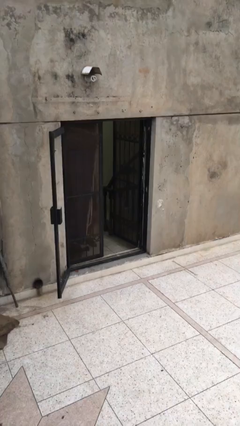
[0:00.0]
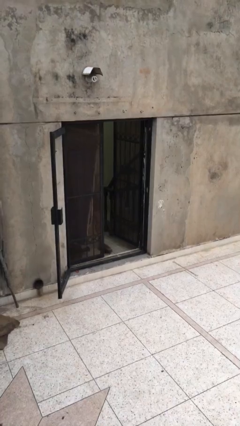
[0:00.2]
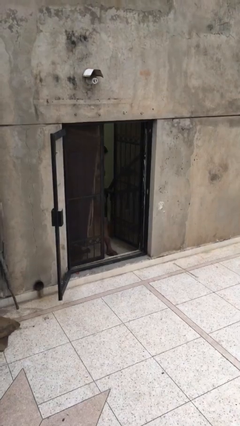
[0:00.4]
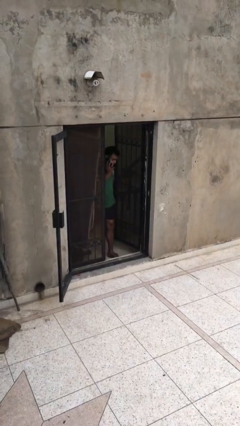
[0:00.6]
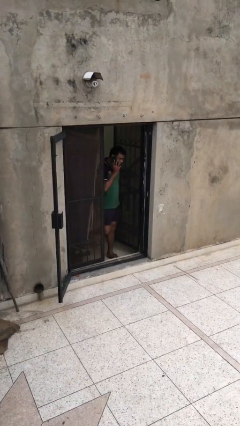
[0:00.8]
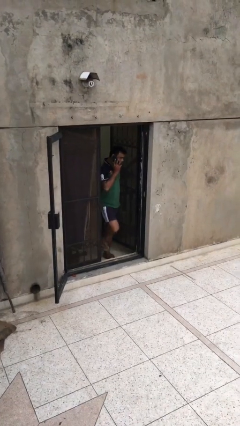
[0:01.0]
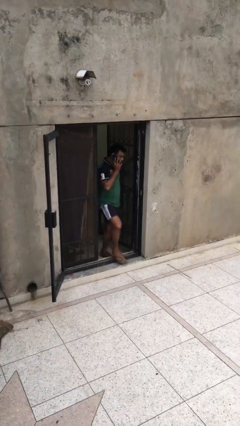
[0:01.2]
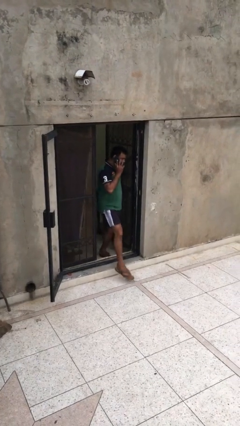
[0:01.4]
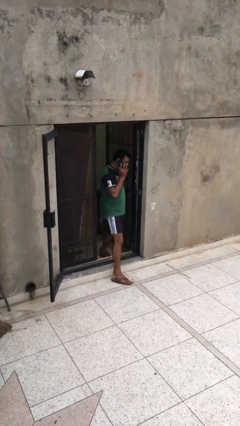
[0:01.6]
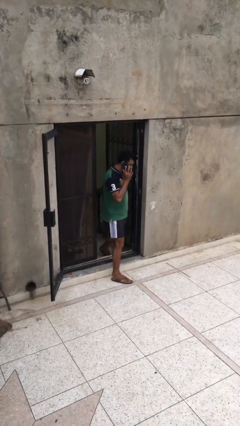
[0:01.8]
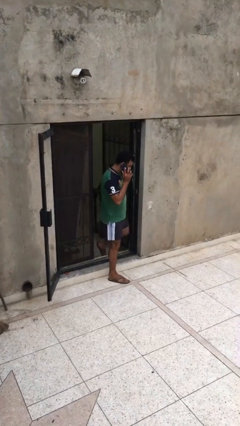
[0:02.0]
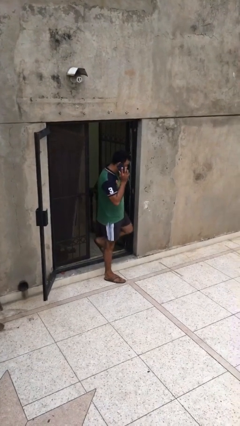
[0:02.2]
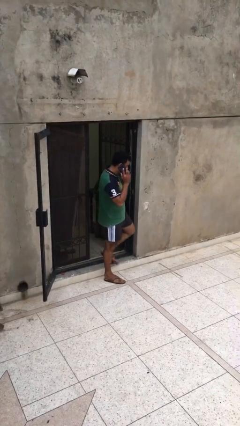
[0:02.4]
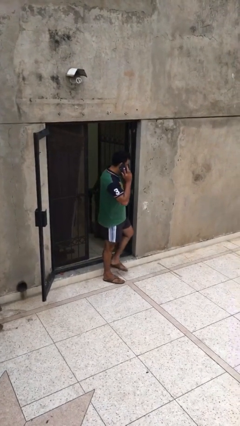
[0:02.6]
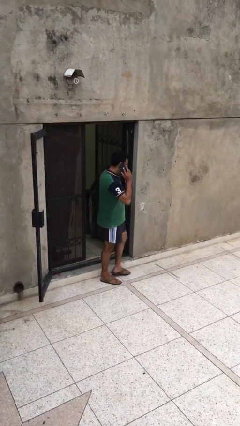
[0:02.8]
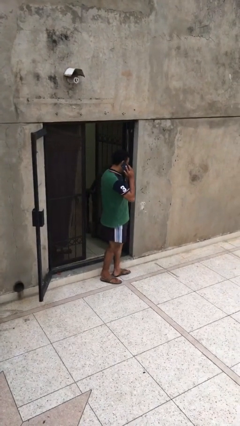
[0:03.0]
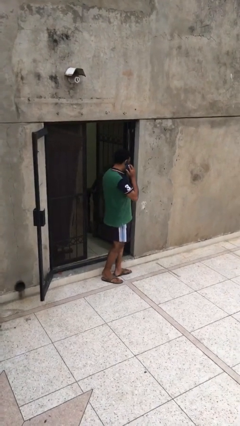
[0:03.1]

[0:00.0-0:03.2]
person enters scene through structure

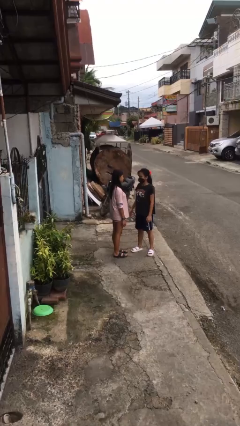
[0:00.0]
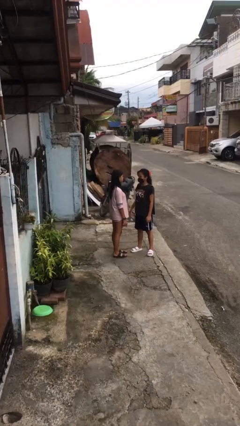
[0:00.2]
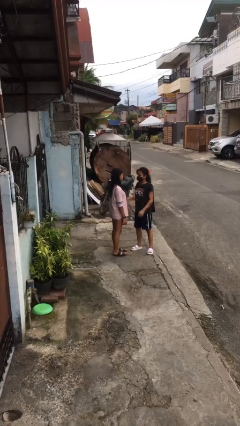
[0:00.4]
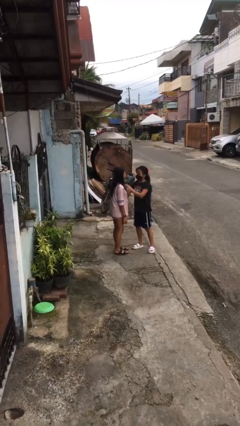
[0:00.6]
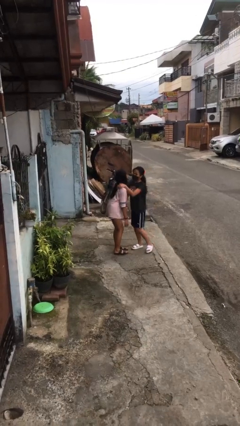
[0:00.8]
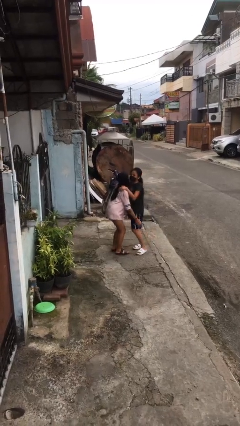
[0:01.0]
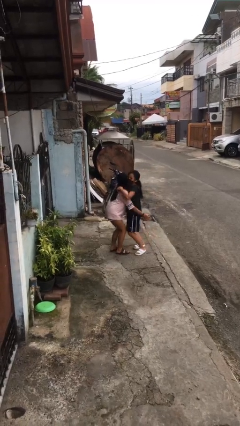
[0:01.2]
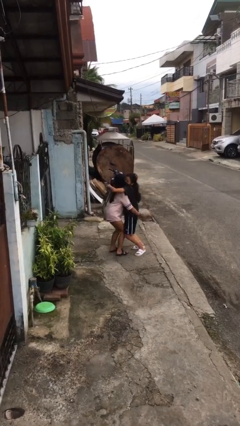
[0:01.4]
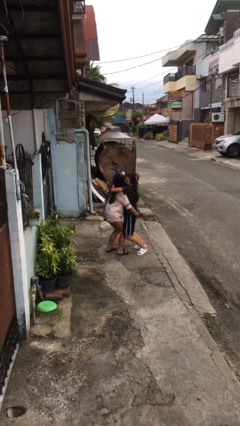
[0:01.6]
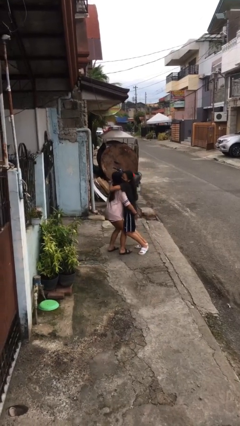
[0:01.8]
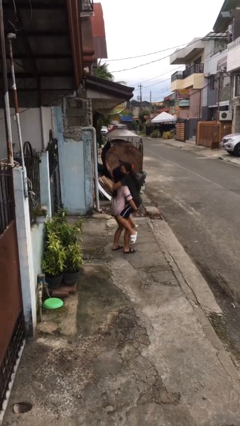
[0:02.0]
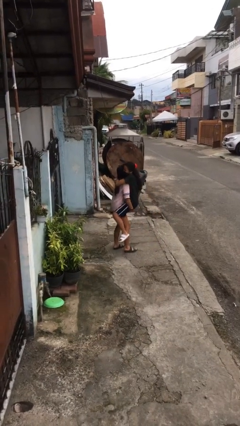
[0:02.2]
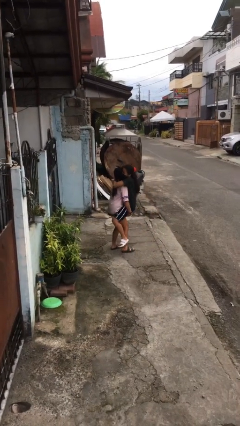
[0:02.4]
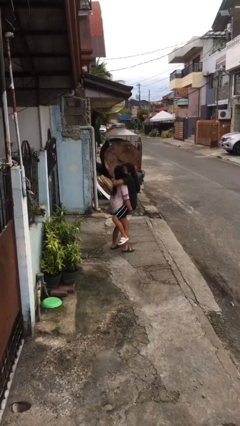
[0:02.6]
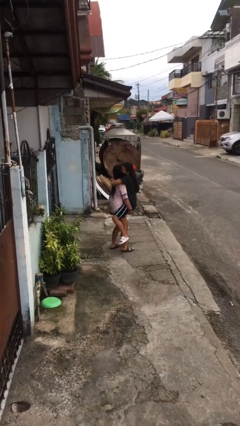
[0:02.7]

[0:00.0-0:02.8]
person picks up person

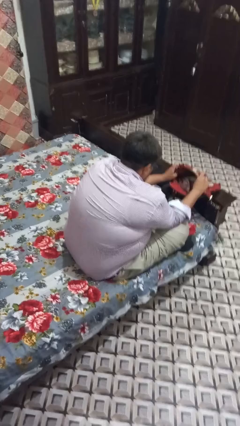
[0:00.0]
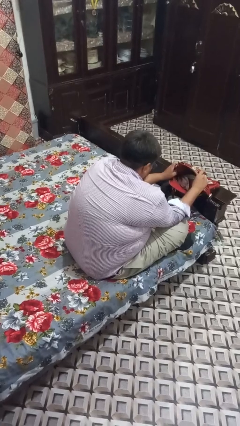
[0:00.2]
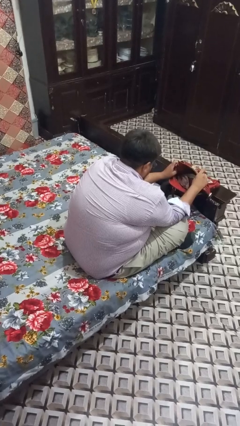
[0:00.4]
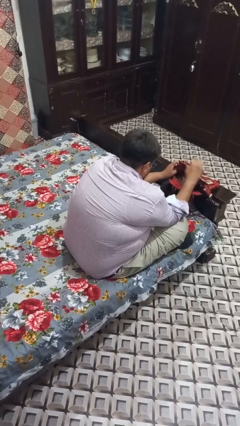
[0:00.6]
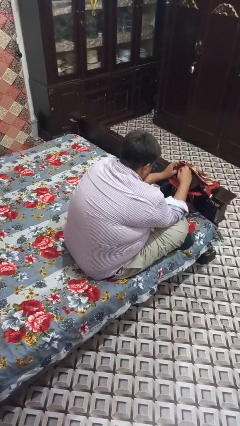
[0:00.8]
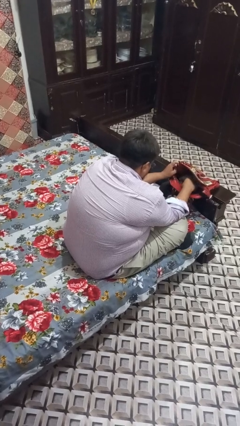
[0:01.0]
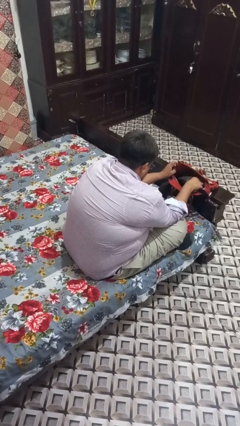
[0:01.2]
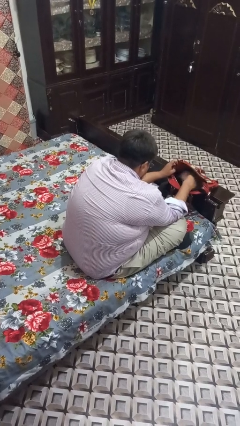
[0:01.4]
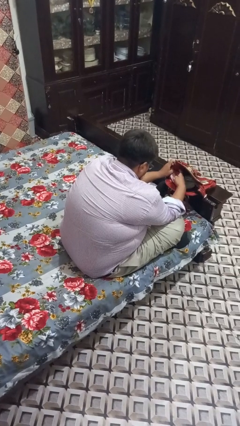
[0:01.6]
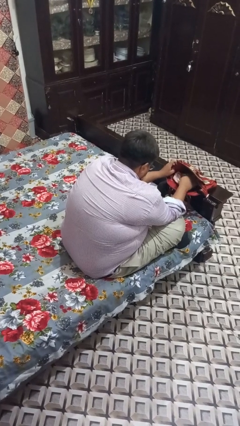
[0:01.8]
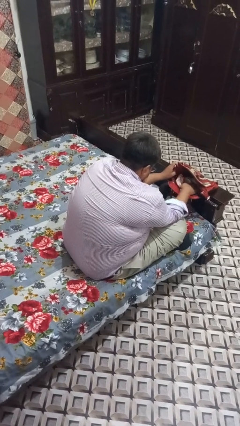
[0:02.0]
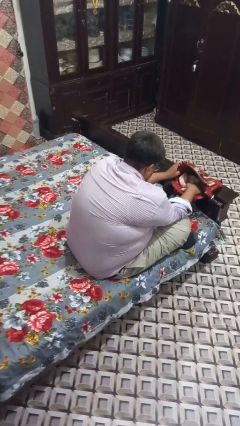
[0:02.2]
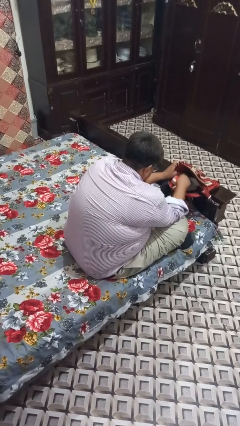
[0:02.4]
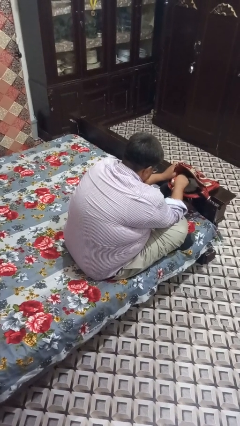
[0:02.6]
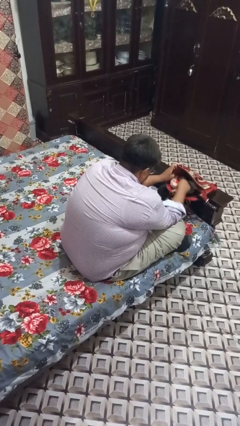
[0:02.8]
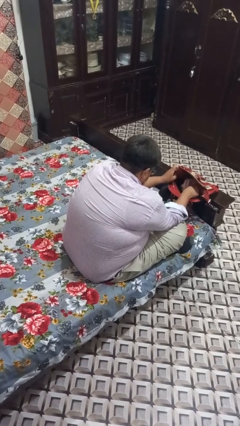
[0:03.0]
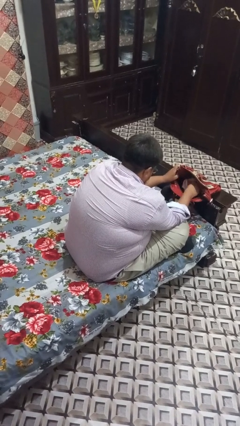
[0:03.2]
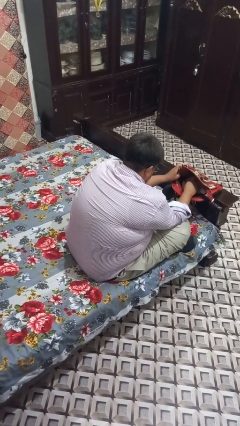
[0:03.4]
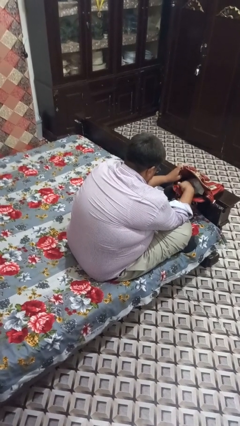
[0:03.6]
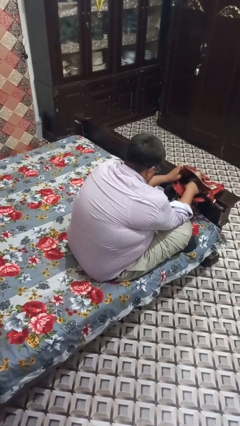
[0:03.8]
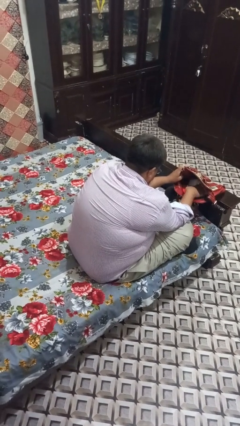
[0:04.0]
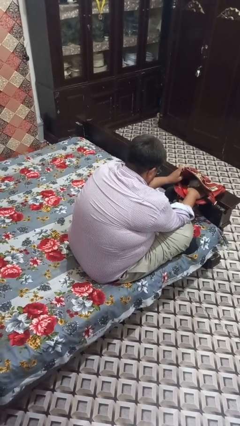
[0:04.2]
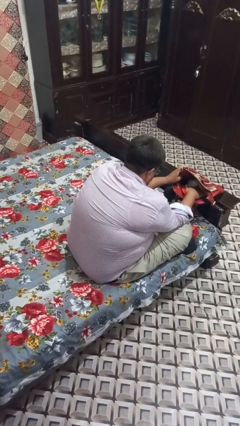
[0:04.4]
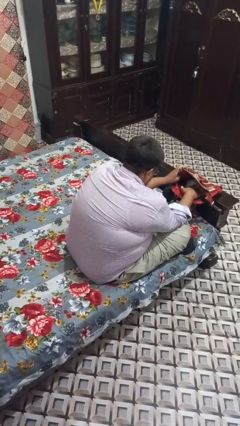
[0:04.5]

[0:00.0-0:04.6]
person searches in purse

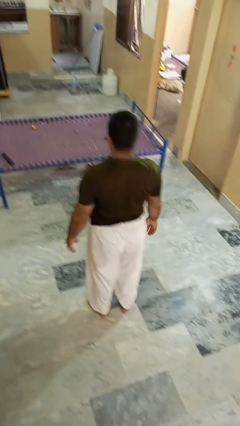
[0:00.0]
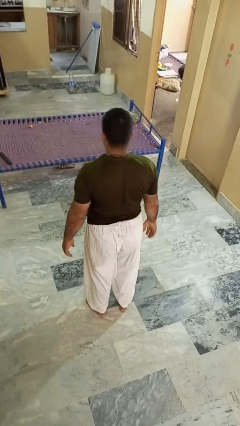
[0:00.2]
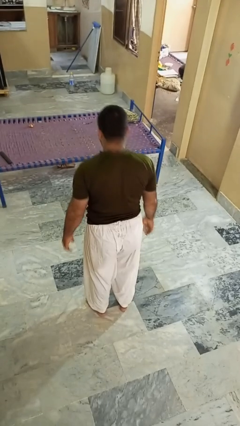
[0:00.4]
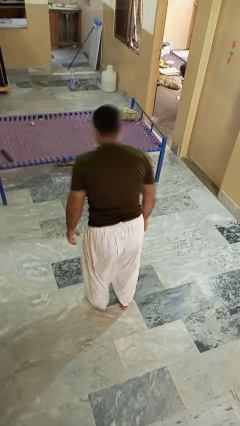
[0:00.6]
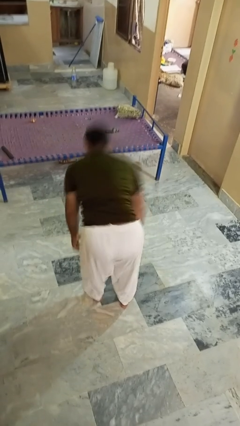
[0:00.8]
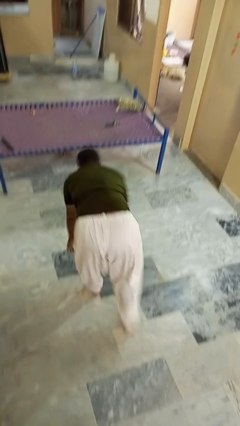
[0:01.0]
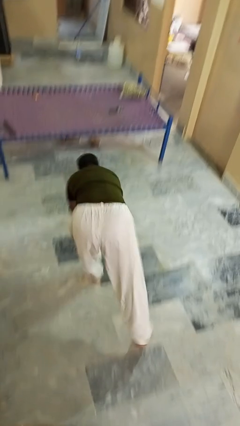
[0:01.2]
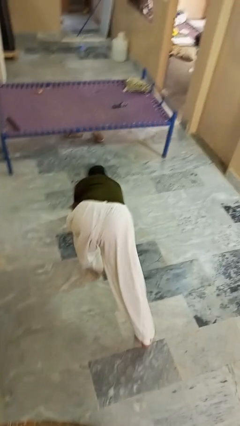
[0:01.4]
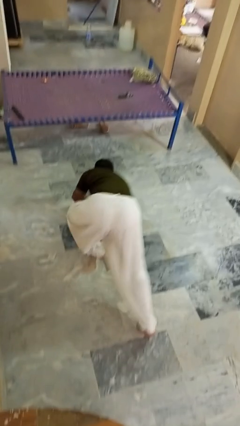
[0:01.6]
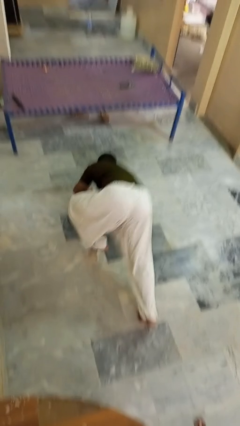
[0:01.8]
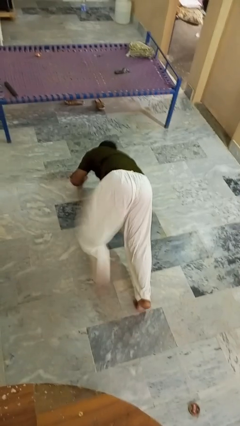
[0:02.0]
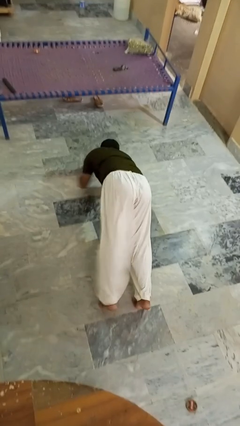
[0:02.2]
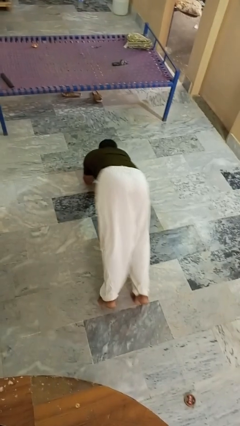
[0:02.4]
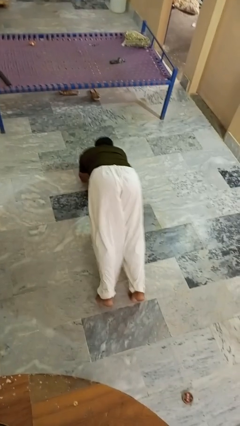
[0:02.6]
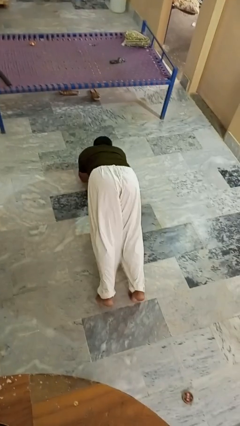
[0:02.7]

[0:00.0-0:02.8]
person exercises with plank

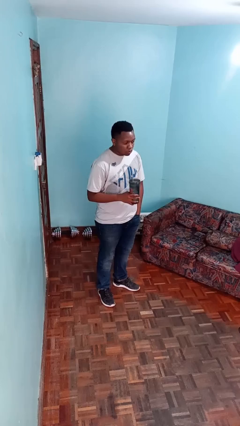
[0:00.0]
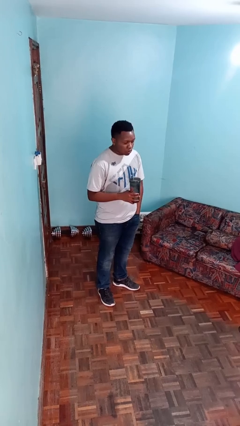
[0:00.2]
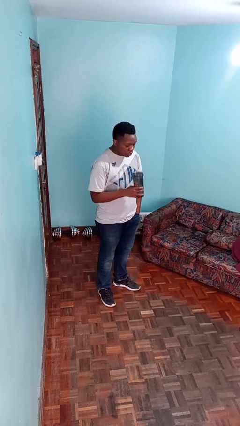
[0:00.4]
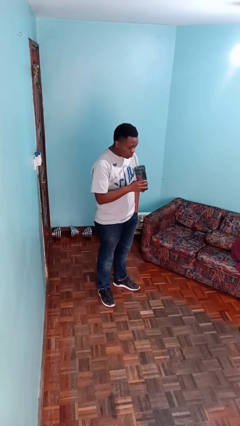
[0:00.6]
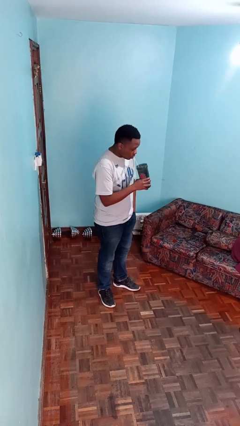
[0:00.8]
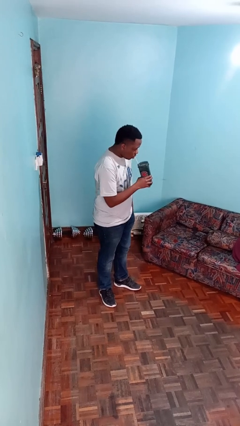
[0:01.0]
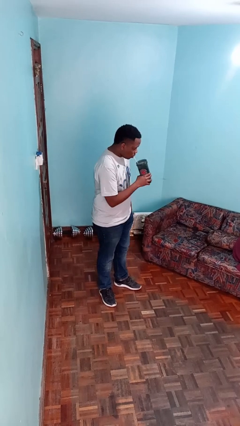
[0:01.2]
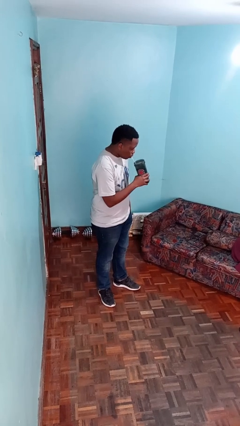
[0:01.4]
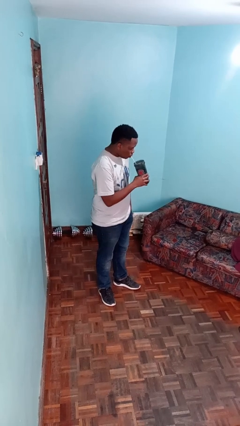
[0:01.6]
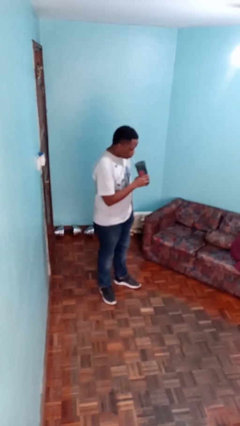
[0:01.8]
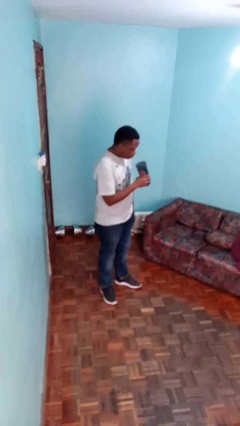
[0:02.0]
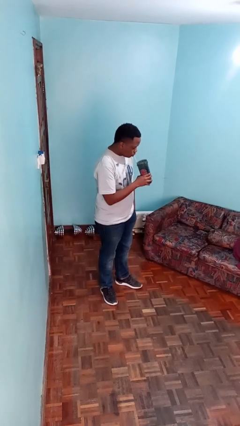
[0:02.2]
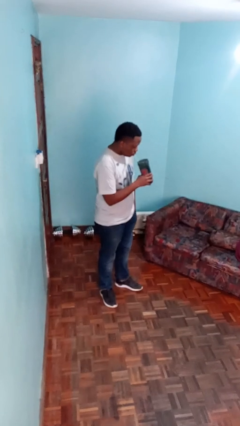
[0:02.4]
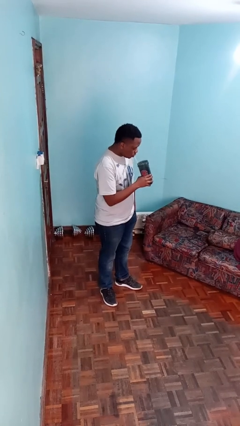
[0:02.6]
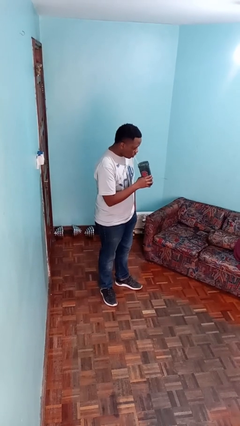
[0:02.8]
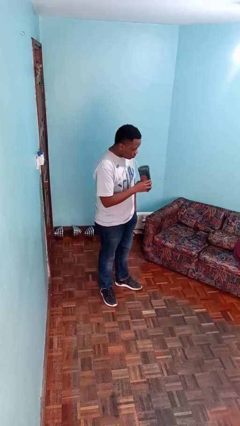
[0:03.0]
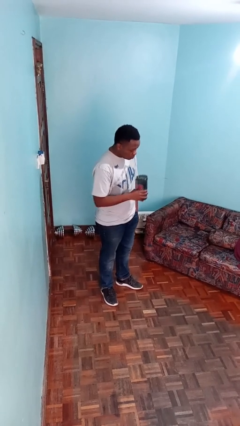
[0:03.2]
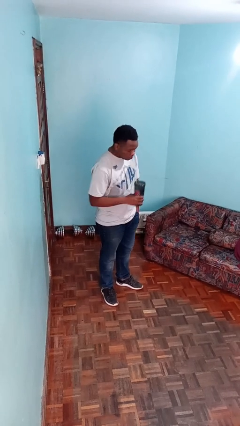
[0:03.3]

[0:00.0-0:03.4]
person drinks from straw

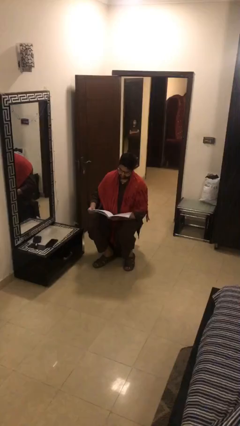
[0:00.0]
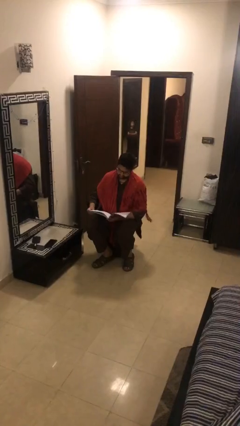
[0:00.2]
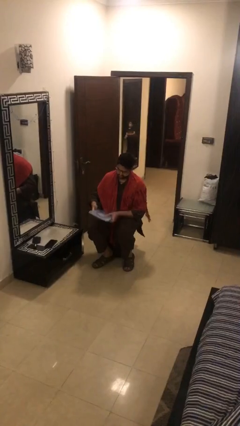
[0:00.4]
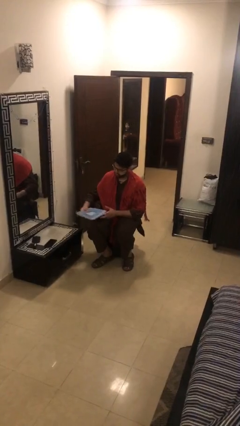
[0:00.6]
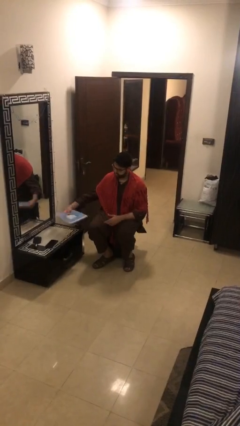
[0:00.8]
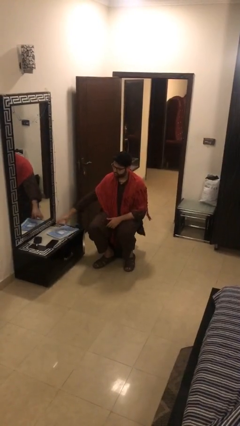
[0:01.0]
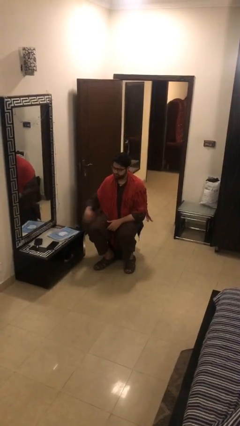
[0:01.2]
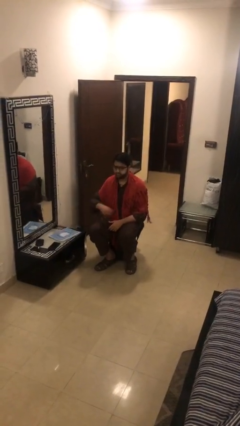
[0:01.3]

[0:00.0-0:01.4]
person puts down object on table
